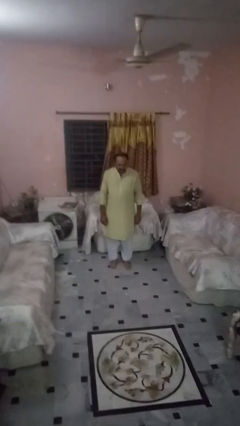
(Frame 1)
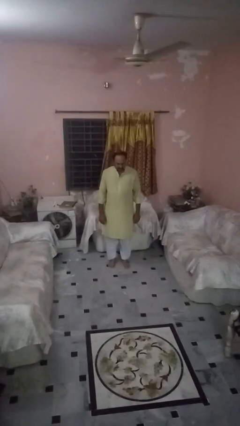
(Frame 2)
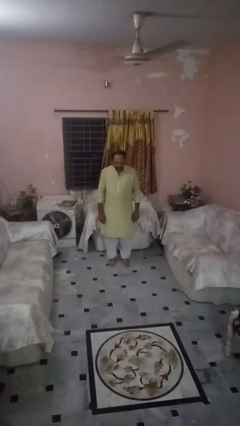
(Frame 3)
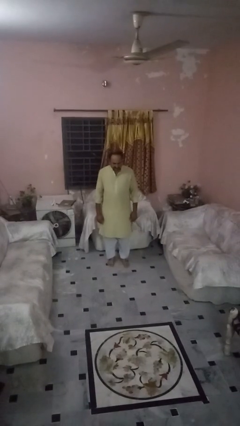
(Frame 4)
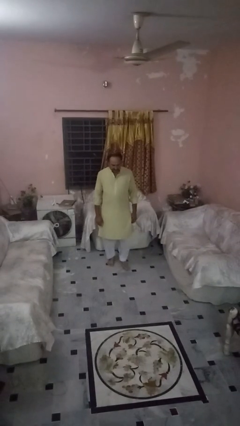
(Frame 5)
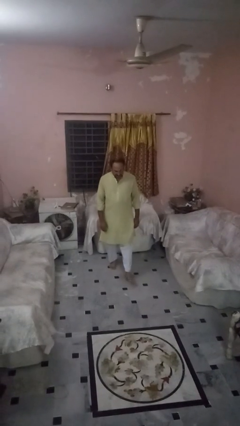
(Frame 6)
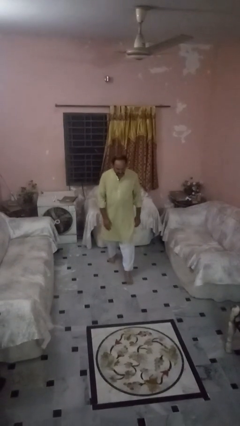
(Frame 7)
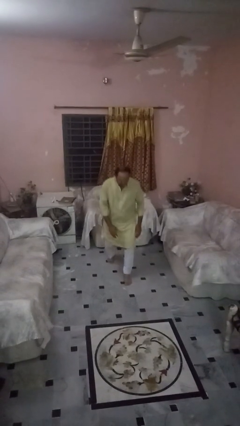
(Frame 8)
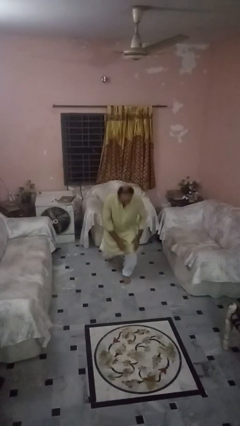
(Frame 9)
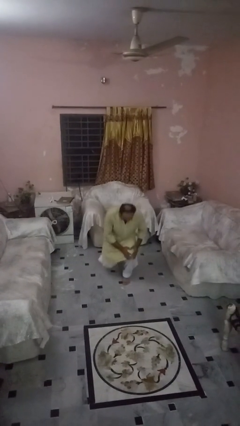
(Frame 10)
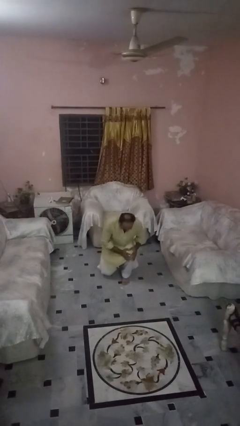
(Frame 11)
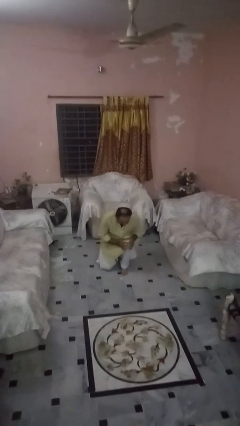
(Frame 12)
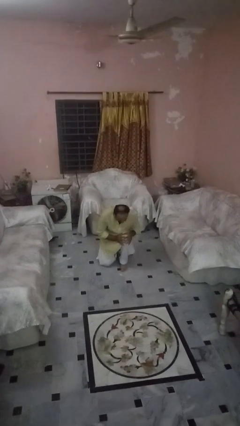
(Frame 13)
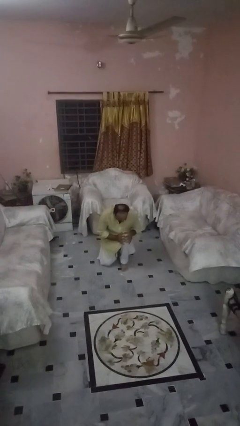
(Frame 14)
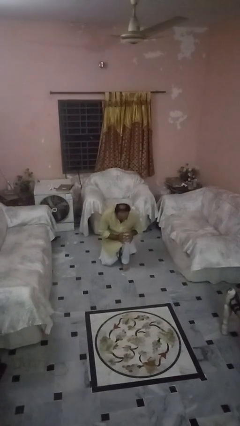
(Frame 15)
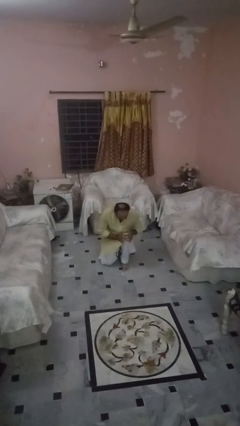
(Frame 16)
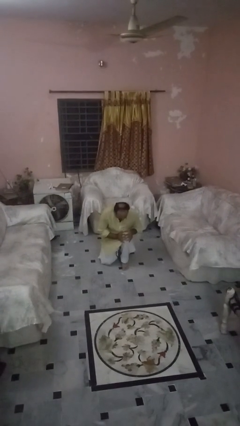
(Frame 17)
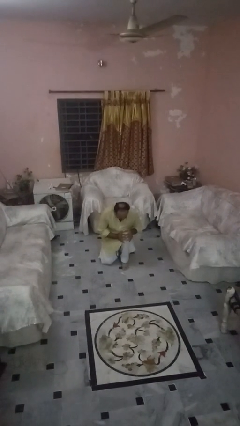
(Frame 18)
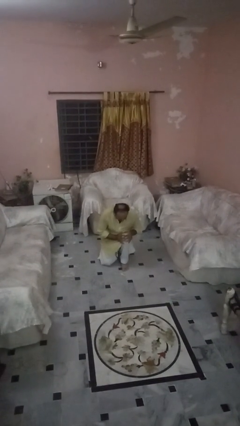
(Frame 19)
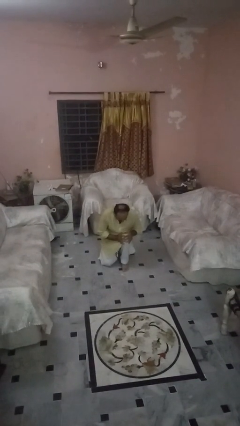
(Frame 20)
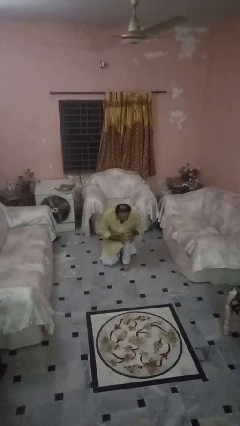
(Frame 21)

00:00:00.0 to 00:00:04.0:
person exercises with lunges

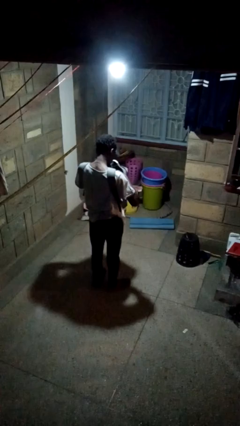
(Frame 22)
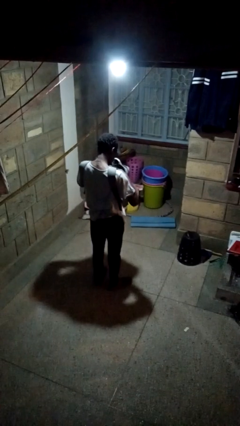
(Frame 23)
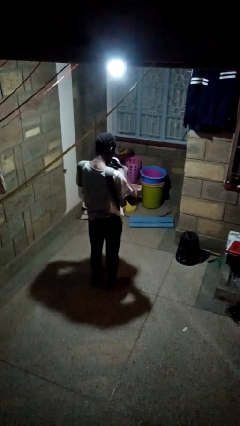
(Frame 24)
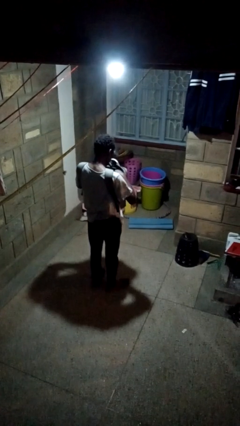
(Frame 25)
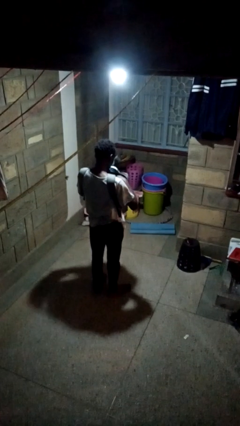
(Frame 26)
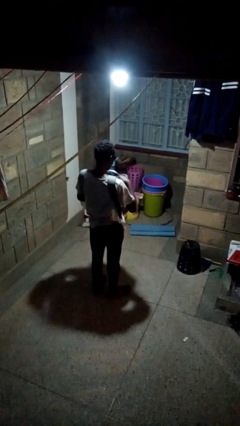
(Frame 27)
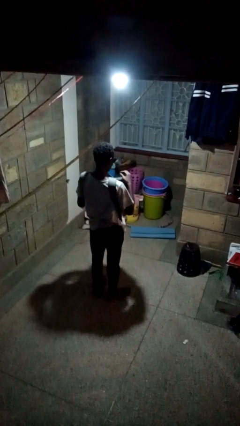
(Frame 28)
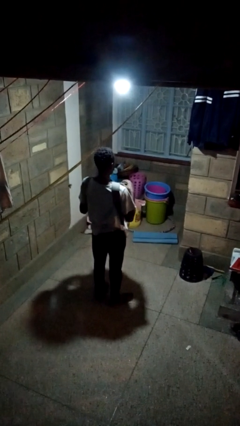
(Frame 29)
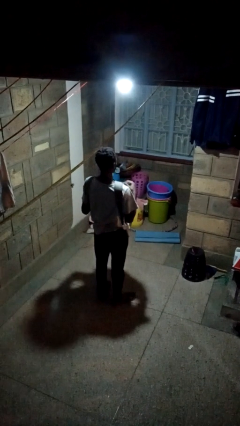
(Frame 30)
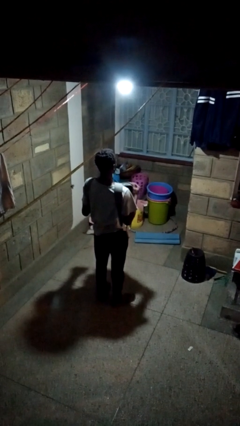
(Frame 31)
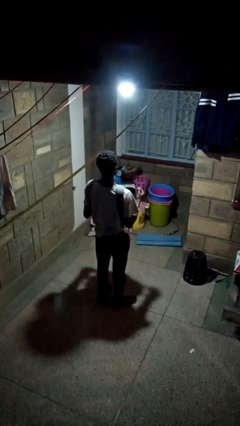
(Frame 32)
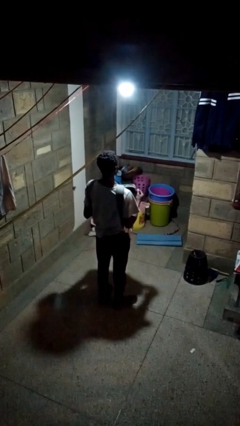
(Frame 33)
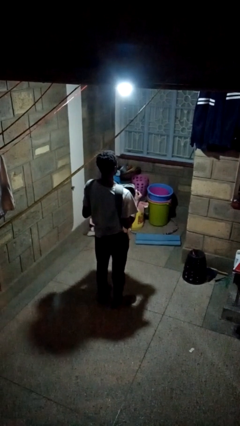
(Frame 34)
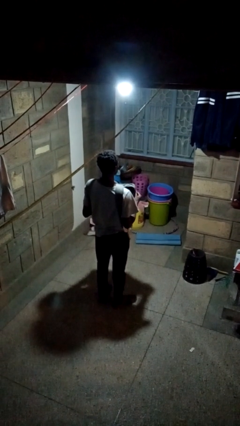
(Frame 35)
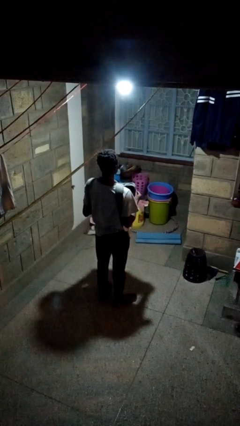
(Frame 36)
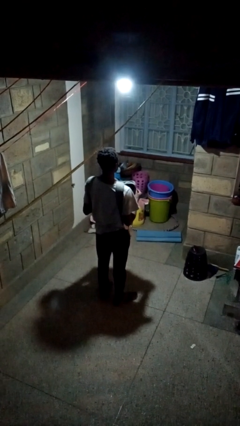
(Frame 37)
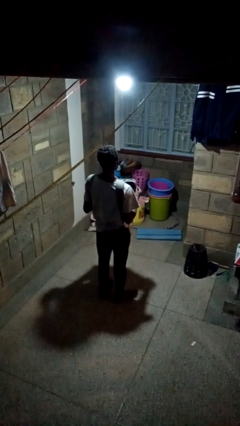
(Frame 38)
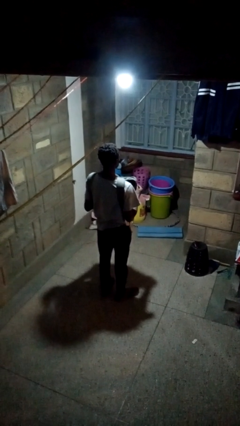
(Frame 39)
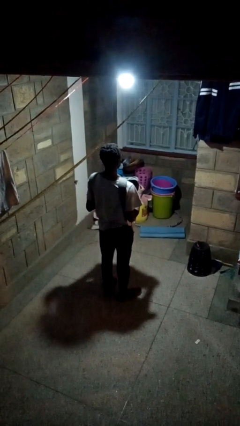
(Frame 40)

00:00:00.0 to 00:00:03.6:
person takes object from backpack

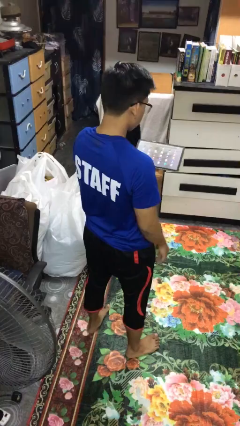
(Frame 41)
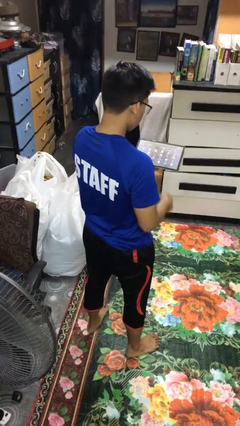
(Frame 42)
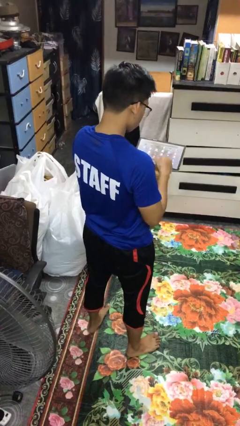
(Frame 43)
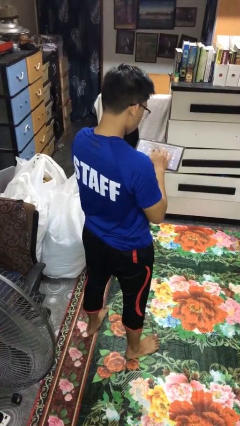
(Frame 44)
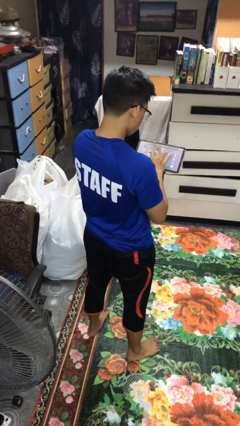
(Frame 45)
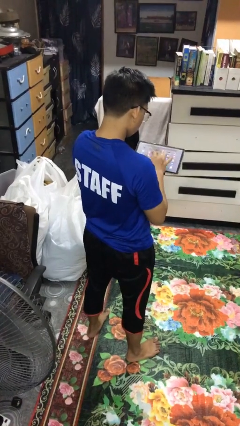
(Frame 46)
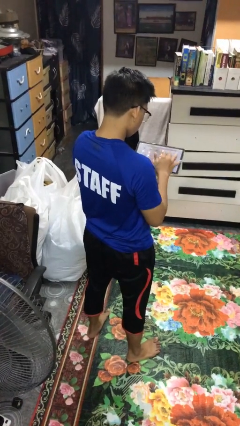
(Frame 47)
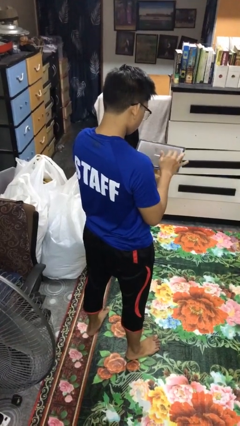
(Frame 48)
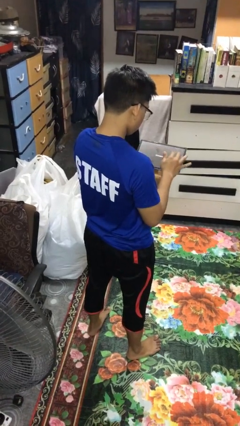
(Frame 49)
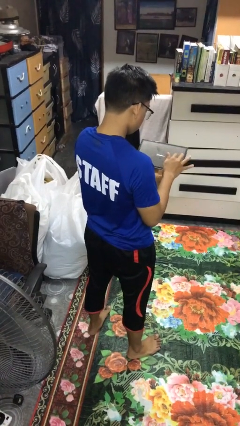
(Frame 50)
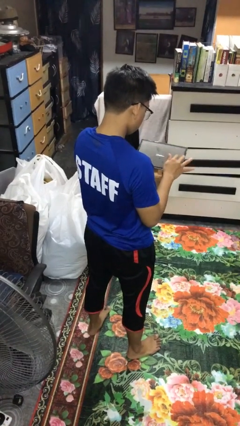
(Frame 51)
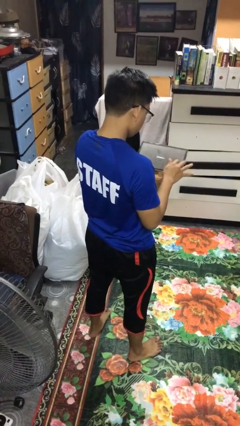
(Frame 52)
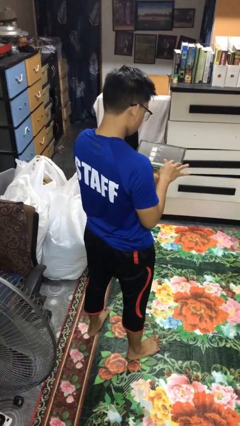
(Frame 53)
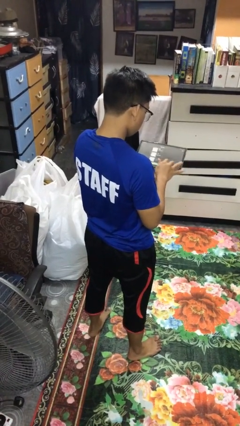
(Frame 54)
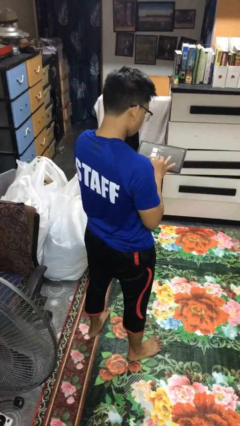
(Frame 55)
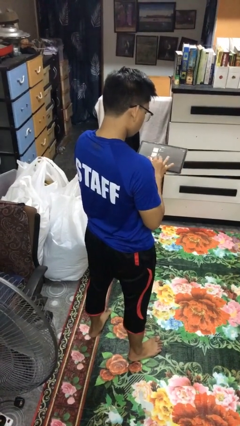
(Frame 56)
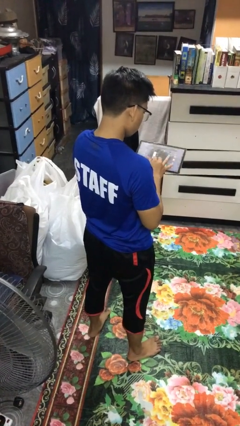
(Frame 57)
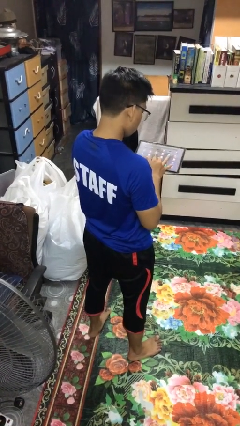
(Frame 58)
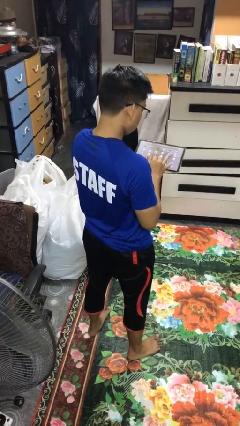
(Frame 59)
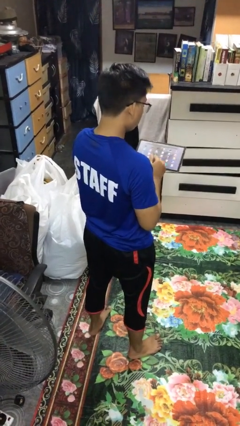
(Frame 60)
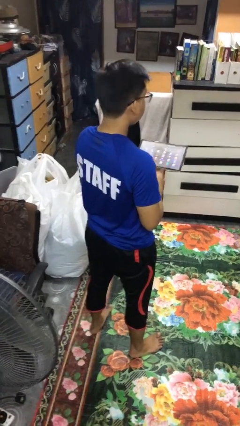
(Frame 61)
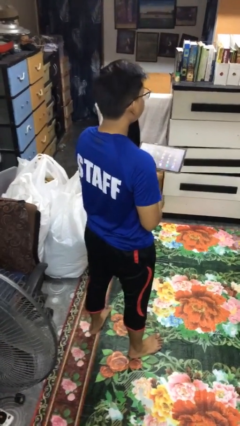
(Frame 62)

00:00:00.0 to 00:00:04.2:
person interacts with tablet

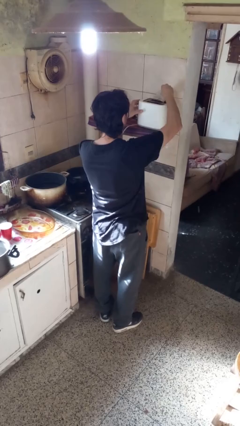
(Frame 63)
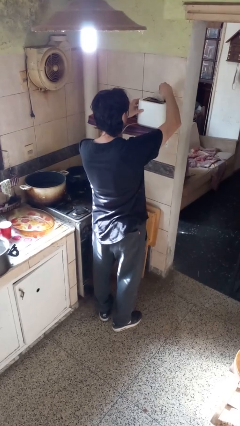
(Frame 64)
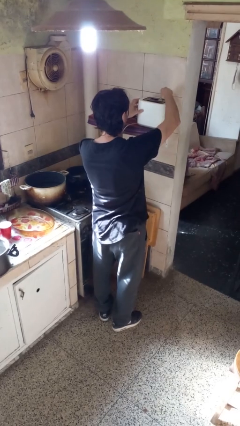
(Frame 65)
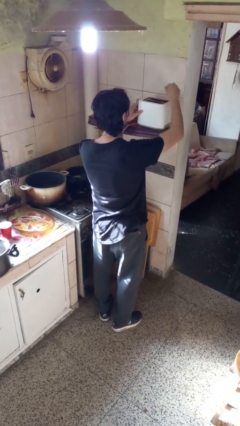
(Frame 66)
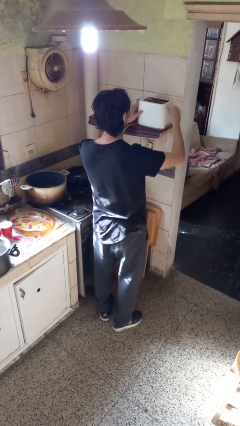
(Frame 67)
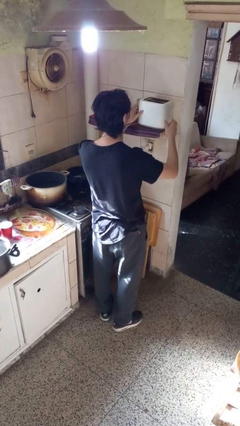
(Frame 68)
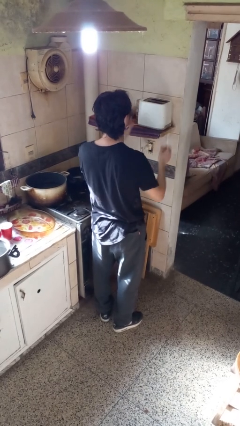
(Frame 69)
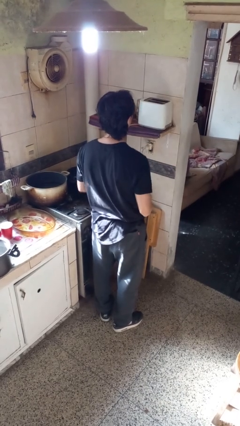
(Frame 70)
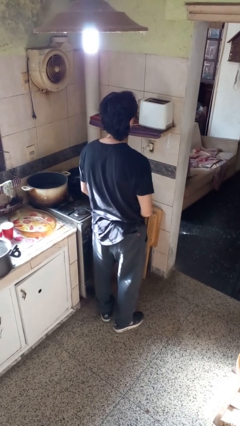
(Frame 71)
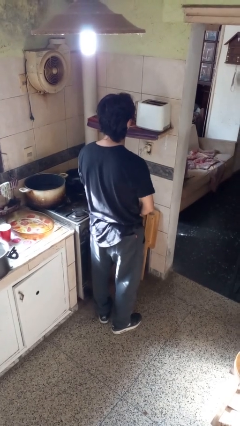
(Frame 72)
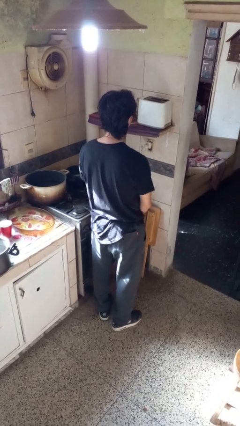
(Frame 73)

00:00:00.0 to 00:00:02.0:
person puts object into toaster

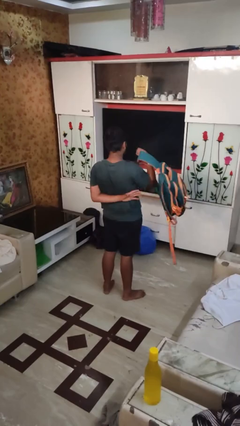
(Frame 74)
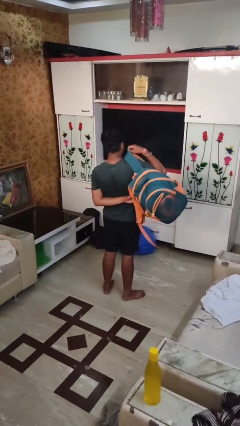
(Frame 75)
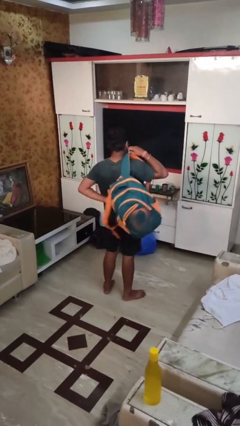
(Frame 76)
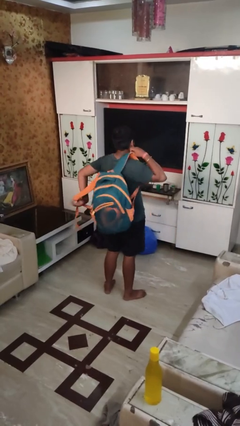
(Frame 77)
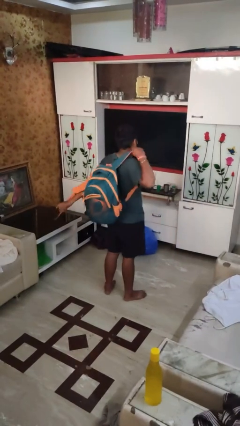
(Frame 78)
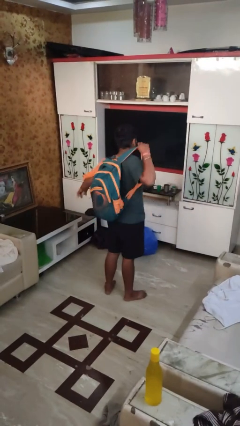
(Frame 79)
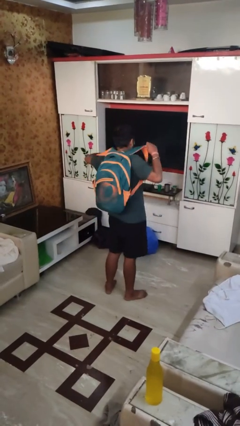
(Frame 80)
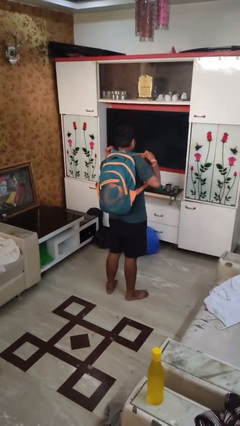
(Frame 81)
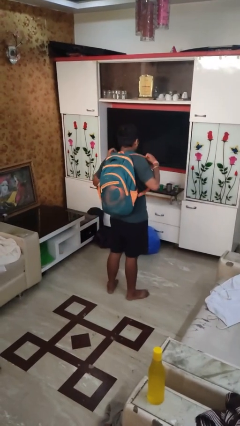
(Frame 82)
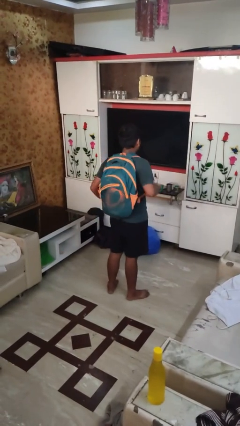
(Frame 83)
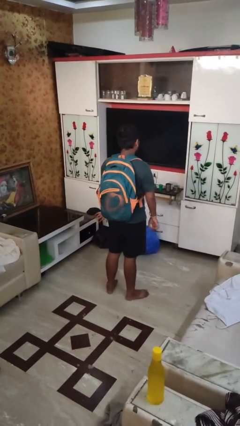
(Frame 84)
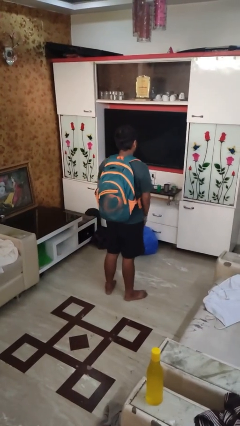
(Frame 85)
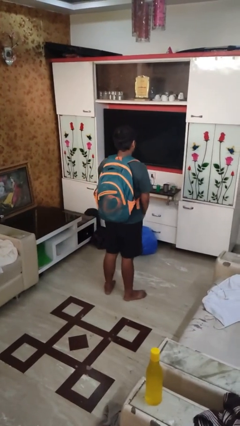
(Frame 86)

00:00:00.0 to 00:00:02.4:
person puts on backpack

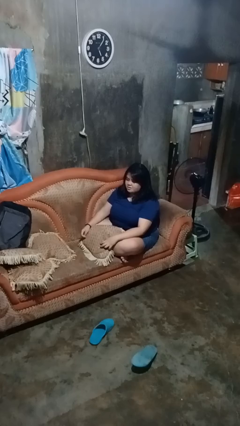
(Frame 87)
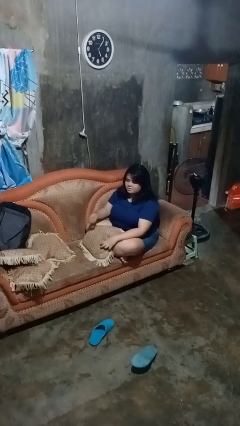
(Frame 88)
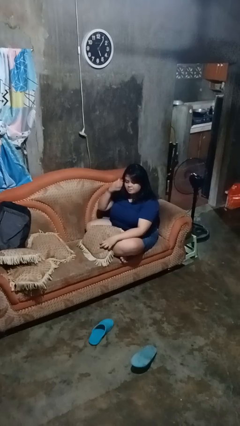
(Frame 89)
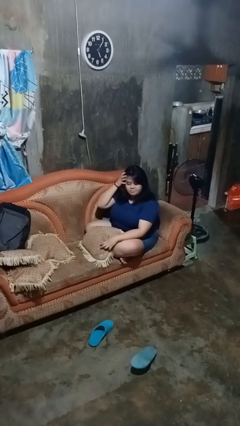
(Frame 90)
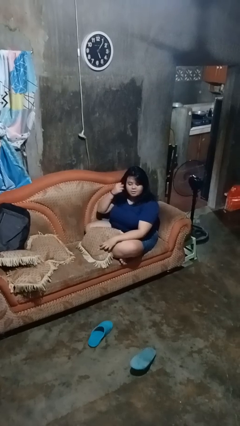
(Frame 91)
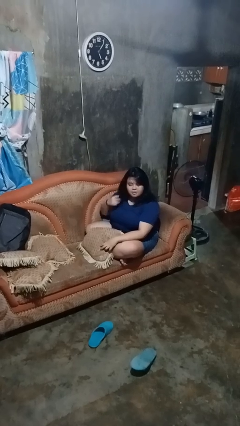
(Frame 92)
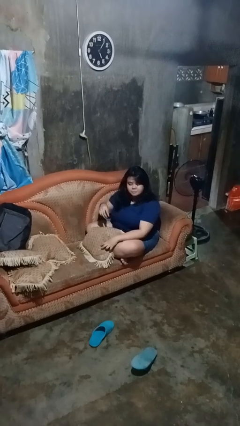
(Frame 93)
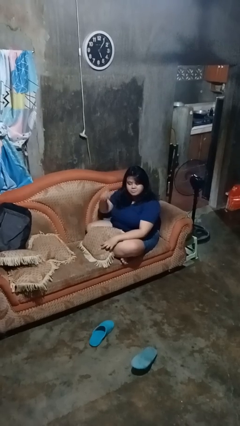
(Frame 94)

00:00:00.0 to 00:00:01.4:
person strokes hair
